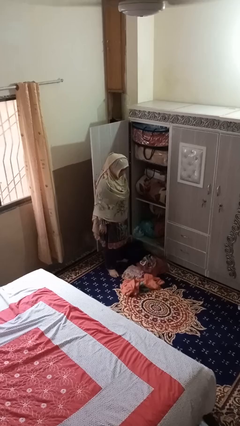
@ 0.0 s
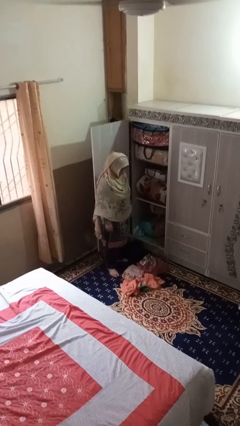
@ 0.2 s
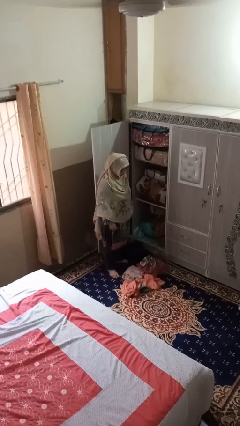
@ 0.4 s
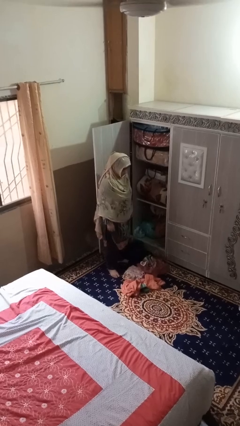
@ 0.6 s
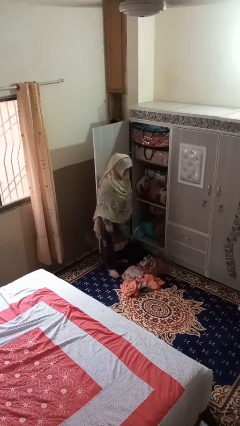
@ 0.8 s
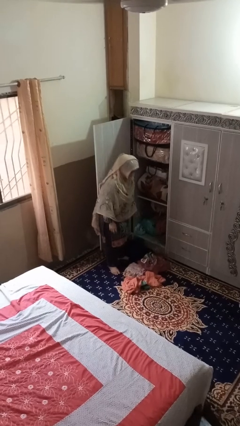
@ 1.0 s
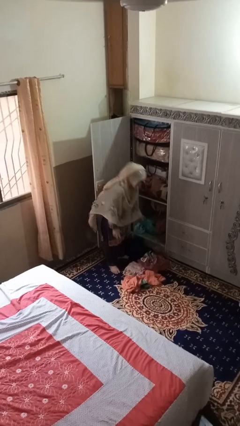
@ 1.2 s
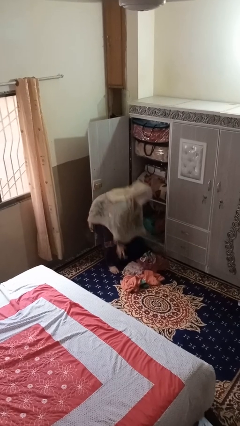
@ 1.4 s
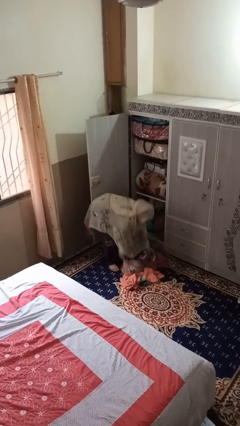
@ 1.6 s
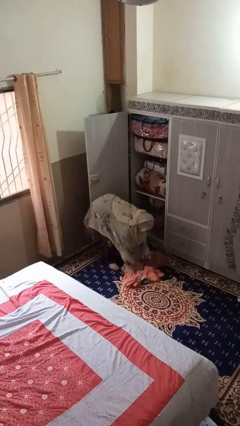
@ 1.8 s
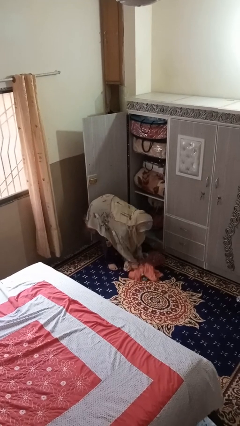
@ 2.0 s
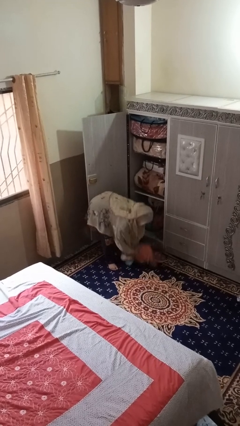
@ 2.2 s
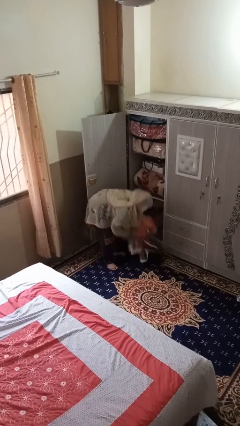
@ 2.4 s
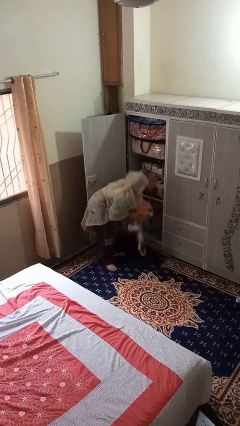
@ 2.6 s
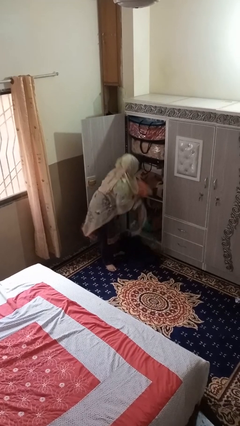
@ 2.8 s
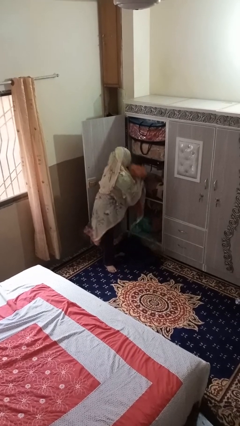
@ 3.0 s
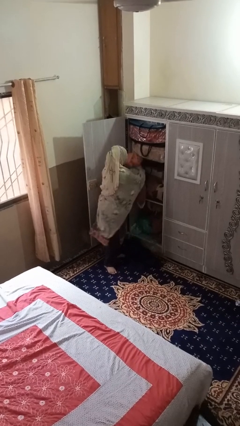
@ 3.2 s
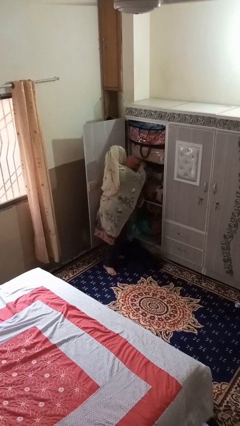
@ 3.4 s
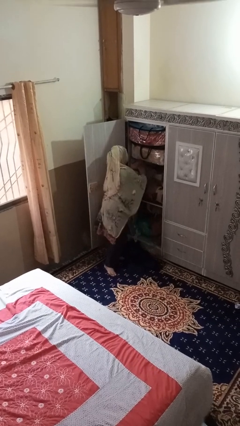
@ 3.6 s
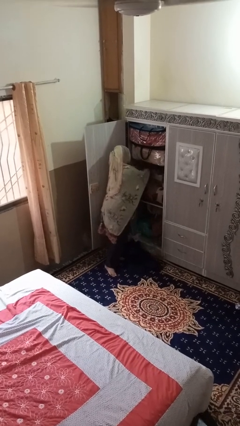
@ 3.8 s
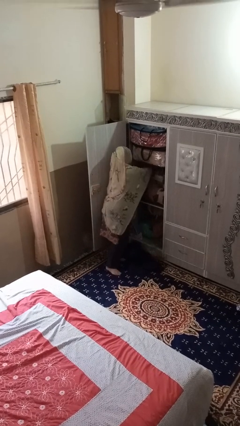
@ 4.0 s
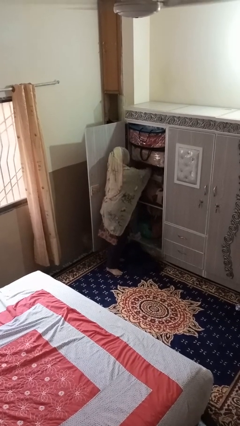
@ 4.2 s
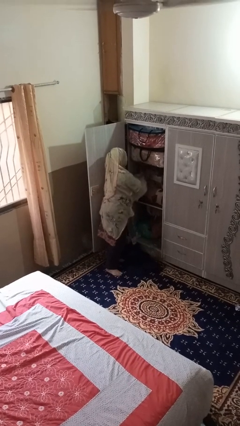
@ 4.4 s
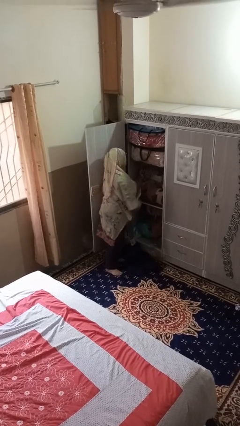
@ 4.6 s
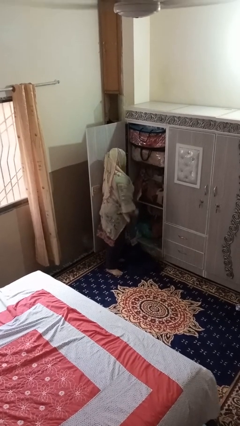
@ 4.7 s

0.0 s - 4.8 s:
person takes clothes from dresser

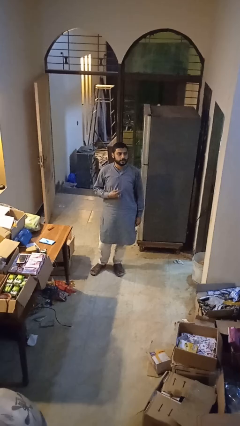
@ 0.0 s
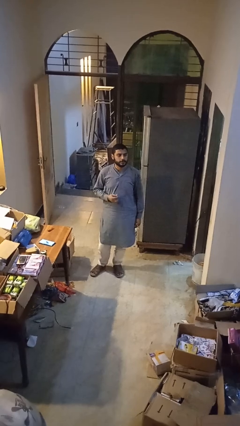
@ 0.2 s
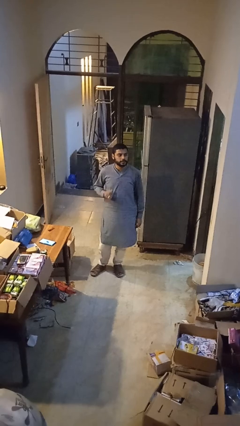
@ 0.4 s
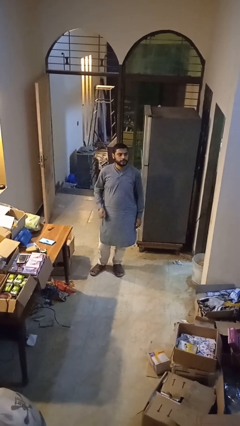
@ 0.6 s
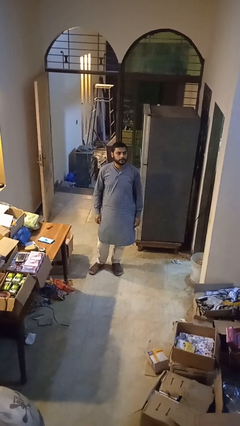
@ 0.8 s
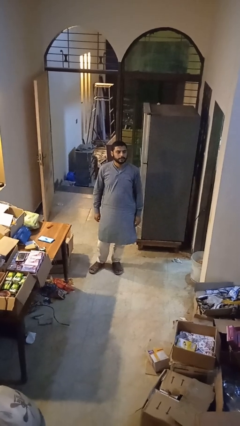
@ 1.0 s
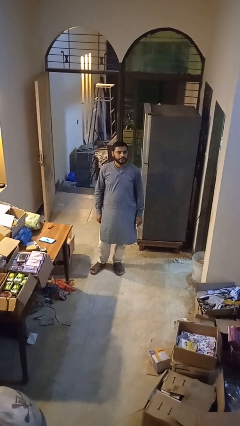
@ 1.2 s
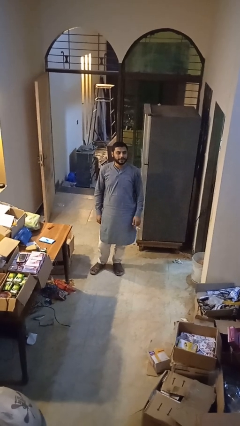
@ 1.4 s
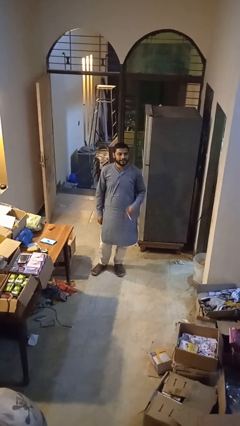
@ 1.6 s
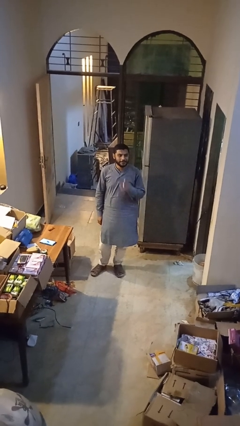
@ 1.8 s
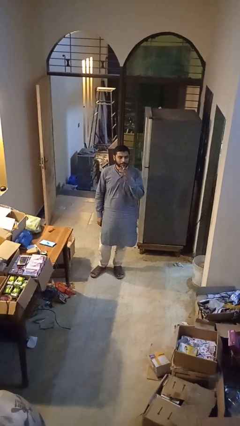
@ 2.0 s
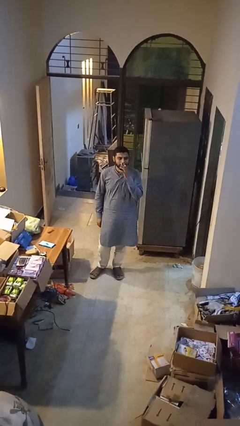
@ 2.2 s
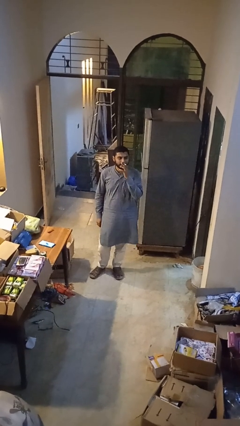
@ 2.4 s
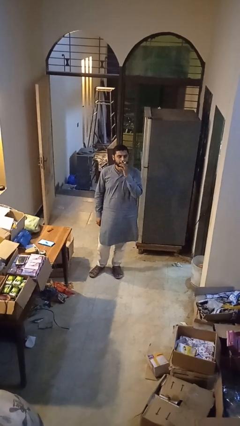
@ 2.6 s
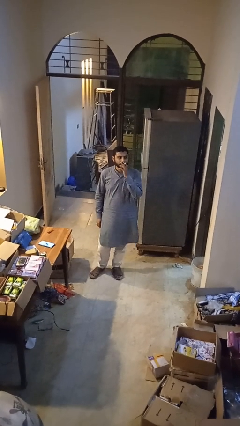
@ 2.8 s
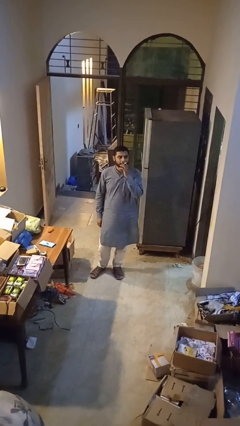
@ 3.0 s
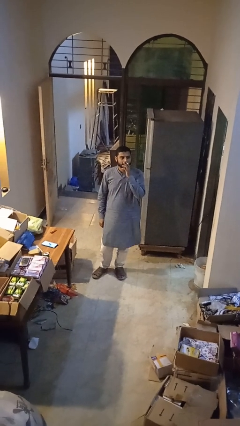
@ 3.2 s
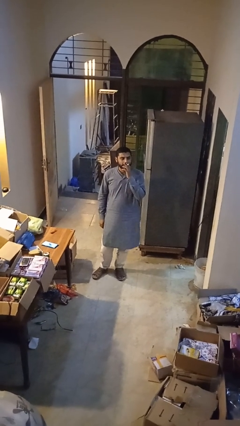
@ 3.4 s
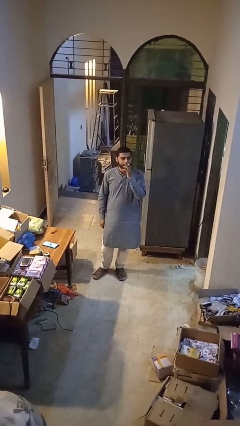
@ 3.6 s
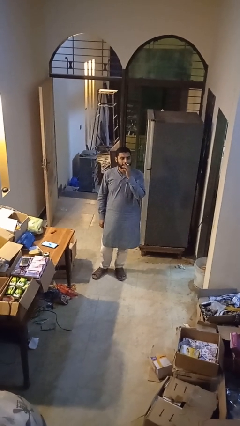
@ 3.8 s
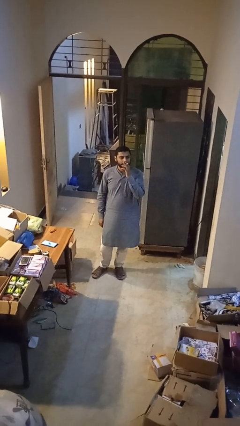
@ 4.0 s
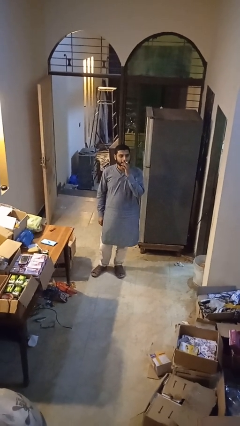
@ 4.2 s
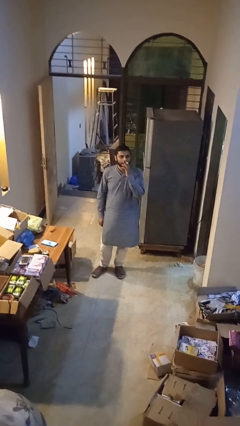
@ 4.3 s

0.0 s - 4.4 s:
person vapes

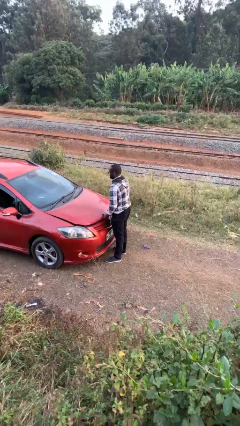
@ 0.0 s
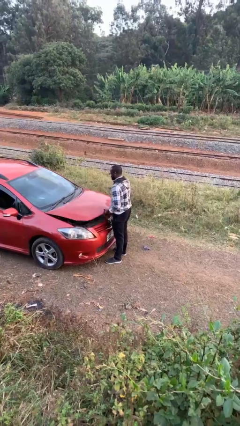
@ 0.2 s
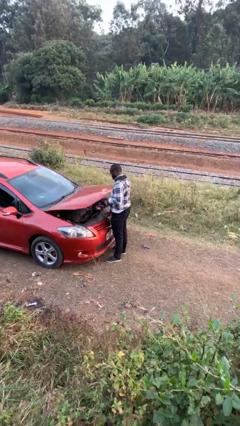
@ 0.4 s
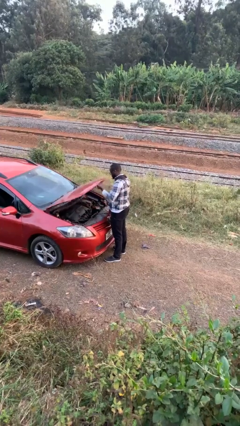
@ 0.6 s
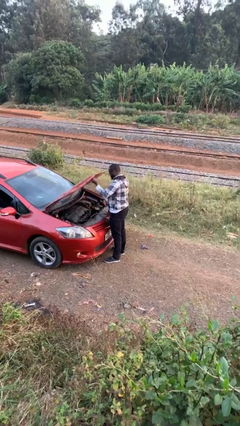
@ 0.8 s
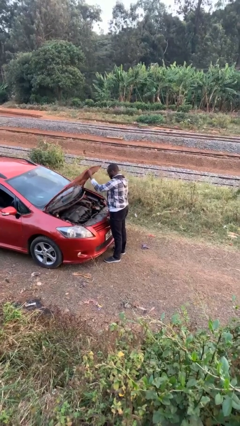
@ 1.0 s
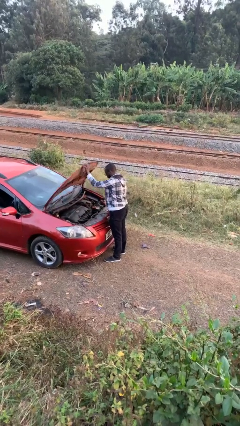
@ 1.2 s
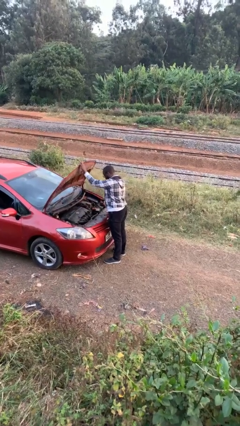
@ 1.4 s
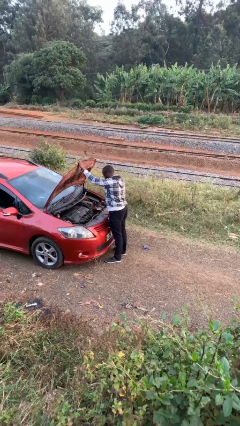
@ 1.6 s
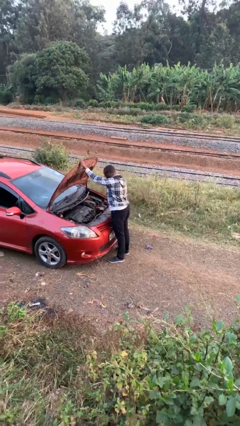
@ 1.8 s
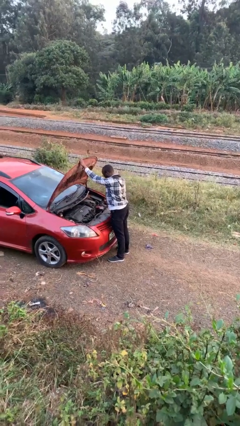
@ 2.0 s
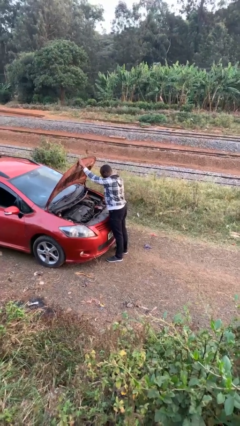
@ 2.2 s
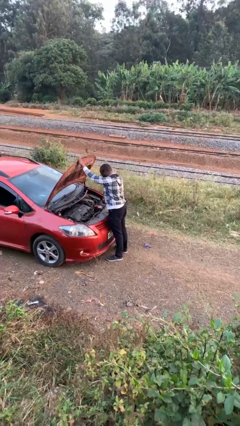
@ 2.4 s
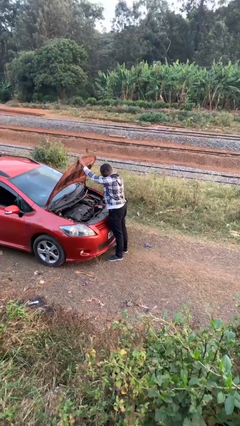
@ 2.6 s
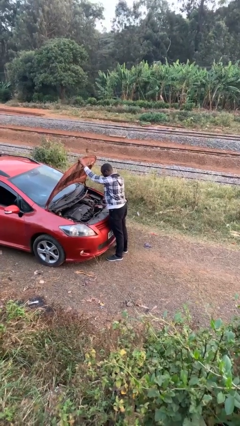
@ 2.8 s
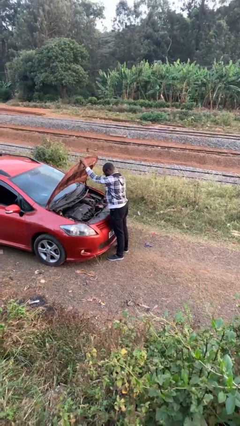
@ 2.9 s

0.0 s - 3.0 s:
person opens car hood

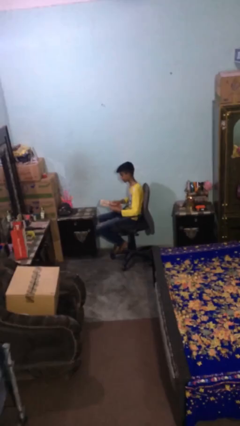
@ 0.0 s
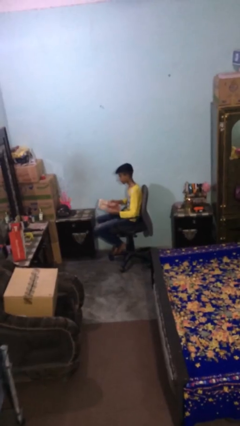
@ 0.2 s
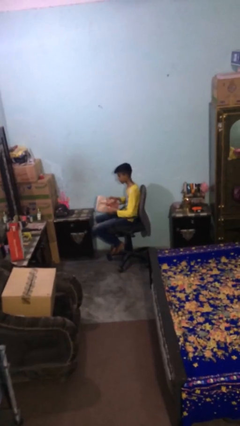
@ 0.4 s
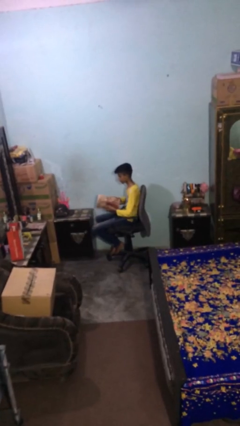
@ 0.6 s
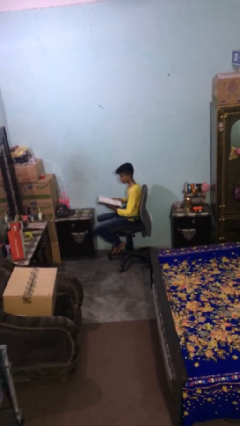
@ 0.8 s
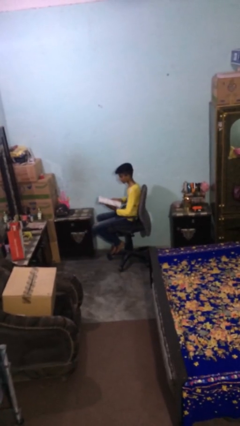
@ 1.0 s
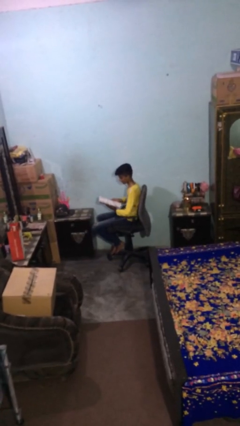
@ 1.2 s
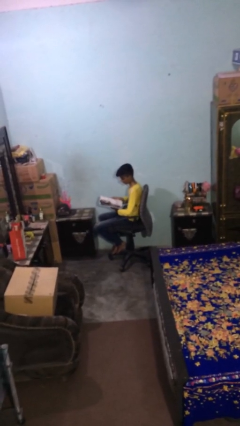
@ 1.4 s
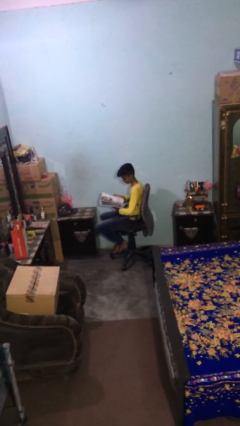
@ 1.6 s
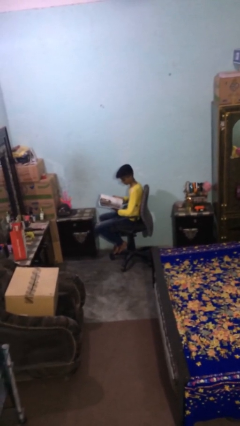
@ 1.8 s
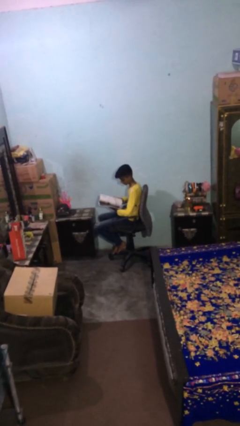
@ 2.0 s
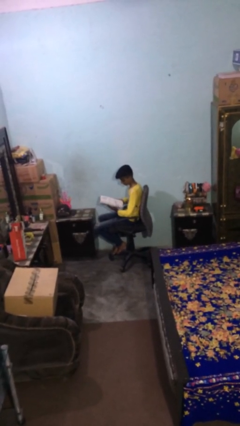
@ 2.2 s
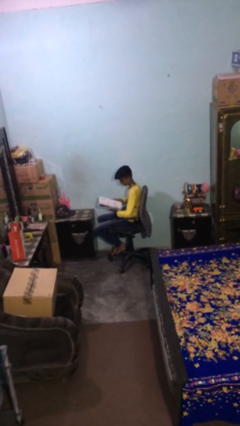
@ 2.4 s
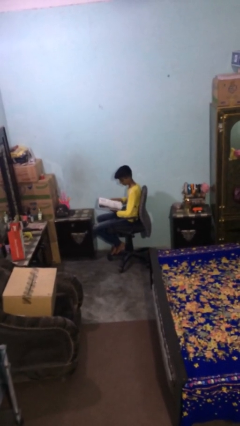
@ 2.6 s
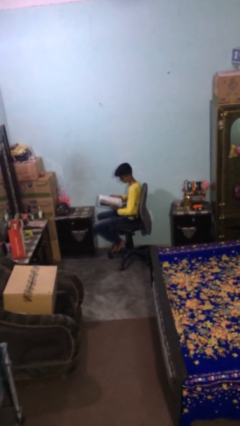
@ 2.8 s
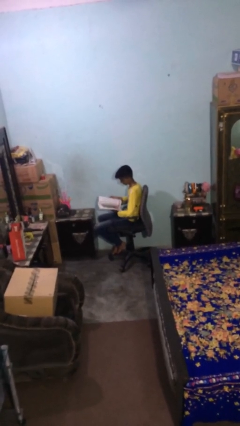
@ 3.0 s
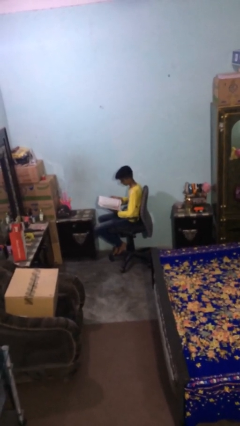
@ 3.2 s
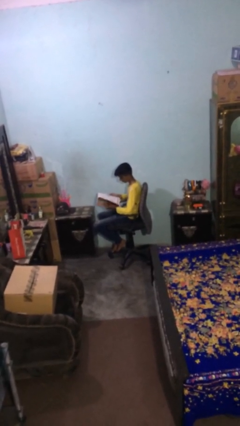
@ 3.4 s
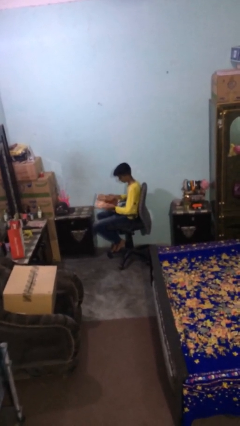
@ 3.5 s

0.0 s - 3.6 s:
person reads document

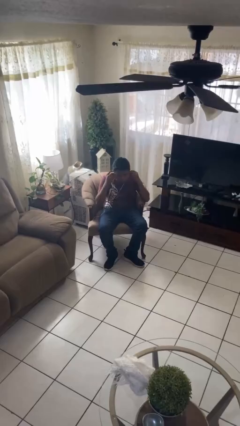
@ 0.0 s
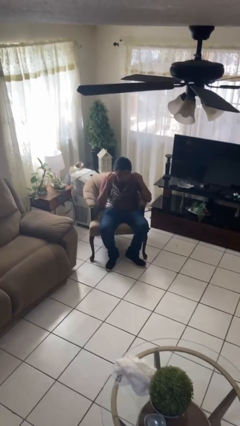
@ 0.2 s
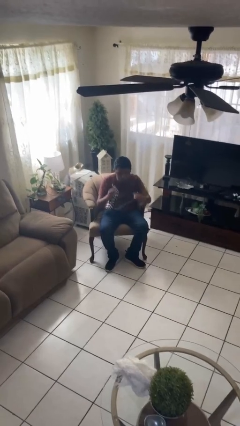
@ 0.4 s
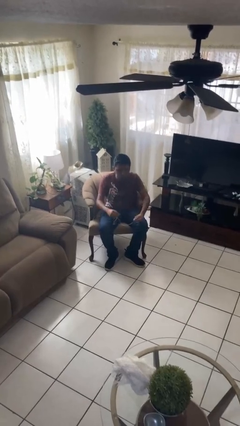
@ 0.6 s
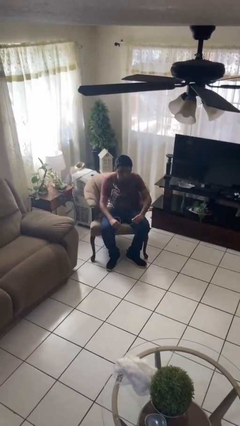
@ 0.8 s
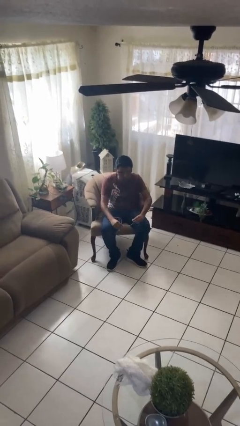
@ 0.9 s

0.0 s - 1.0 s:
person takes off headphones

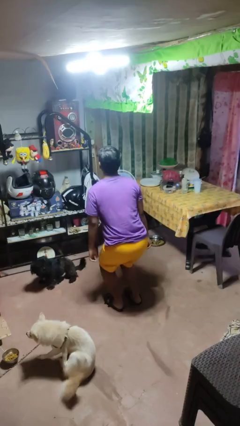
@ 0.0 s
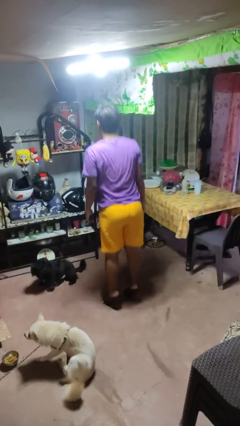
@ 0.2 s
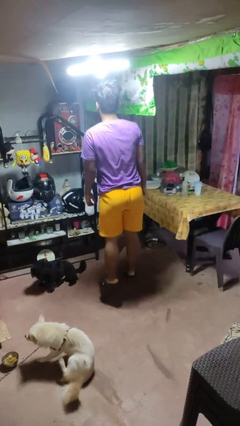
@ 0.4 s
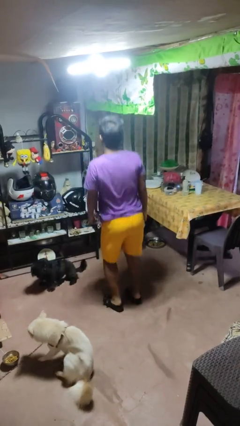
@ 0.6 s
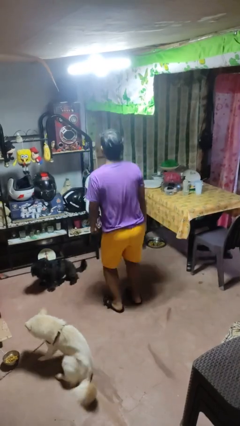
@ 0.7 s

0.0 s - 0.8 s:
person jumps
